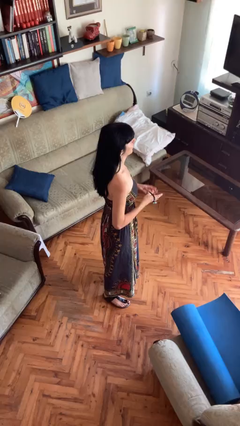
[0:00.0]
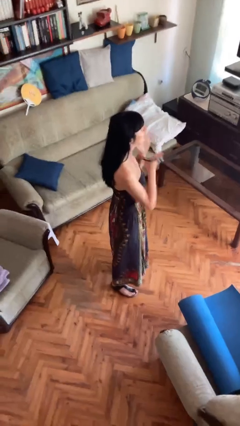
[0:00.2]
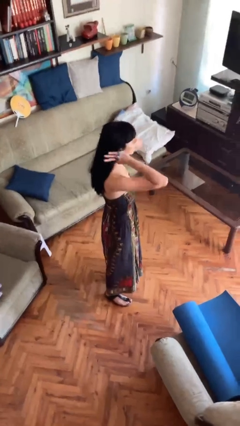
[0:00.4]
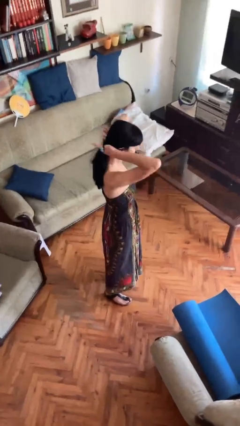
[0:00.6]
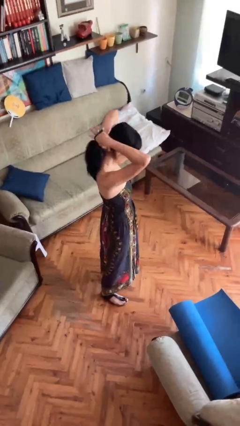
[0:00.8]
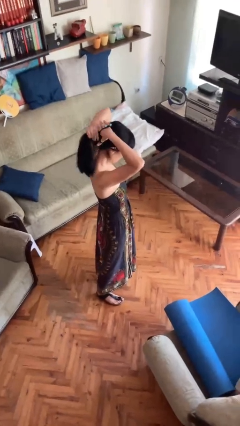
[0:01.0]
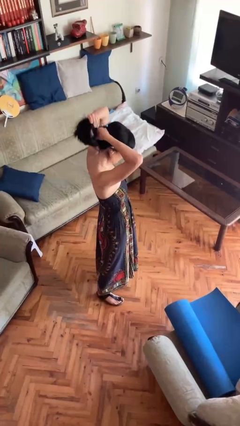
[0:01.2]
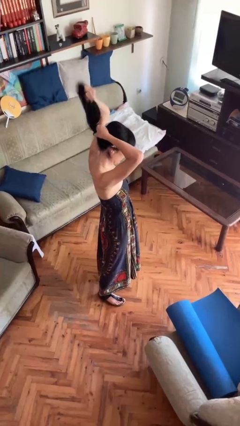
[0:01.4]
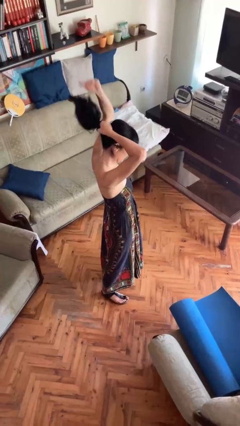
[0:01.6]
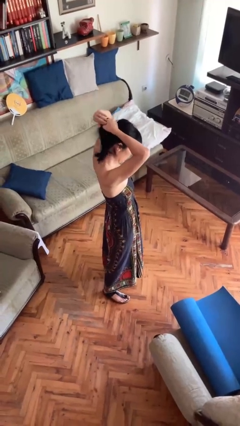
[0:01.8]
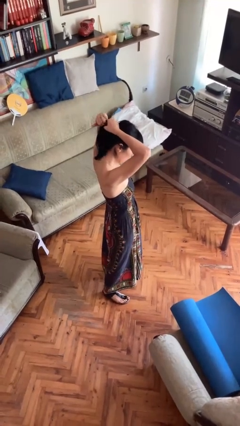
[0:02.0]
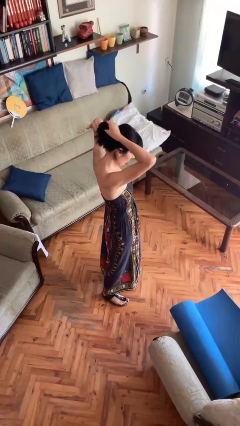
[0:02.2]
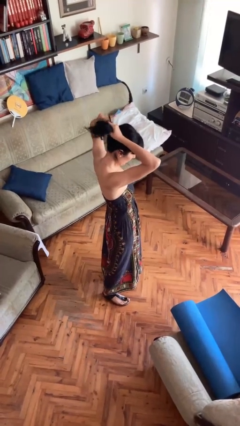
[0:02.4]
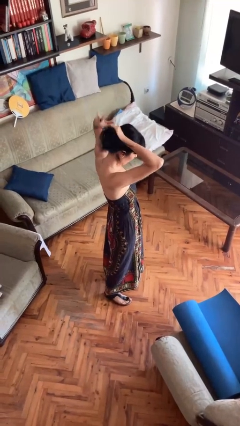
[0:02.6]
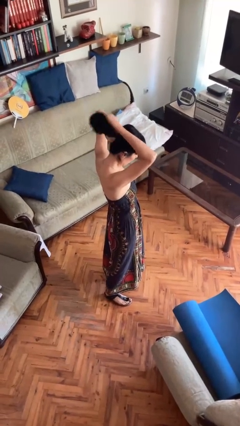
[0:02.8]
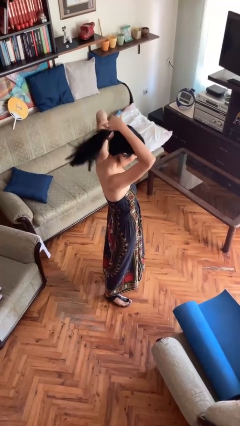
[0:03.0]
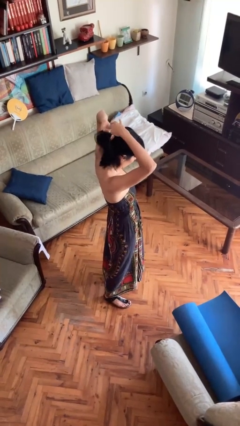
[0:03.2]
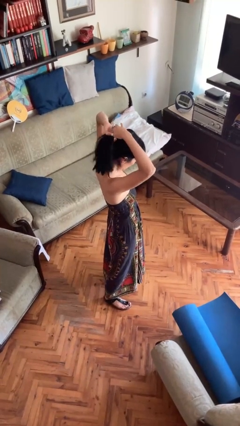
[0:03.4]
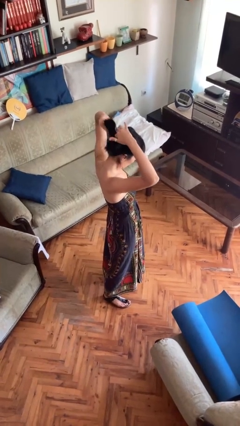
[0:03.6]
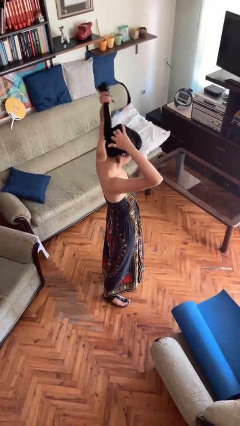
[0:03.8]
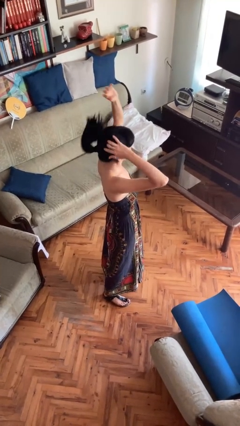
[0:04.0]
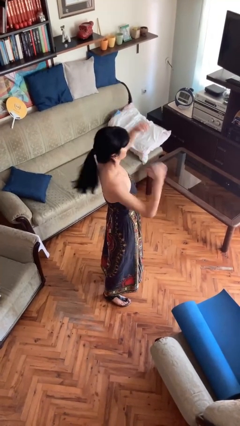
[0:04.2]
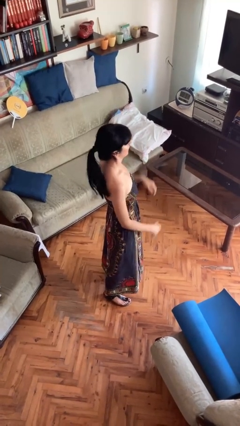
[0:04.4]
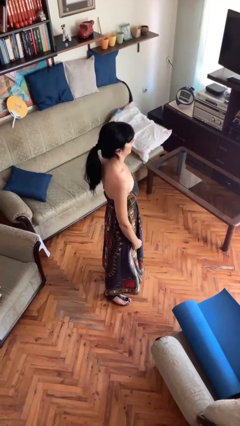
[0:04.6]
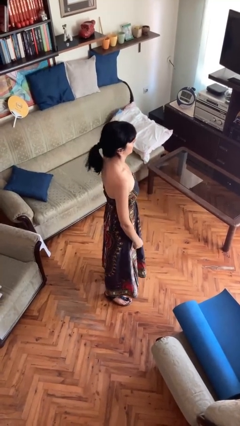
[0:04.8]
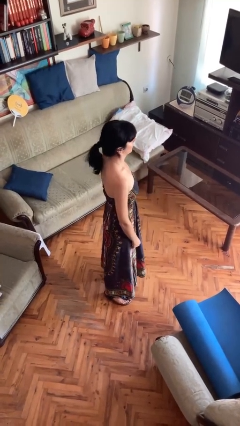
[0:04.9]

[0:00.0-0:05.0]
person puts hair in ponytail

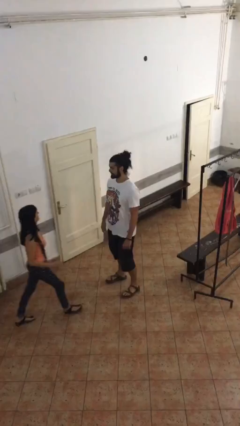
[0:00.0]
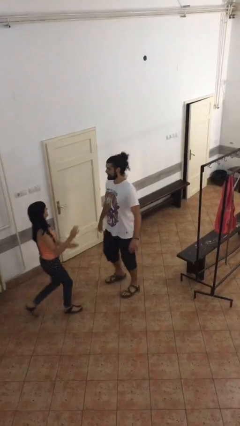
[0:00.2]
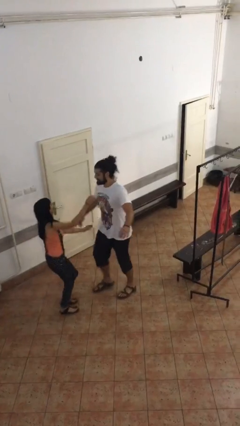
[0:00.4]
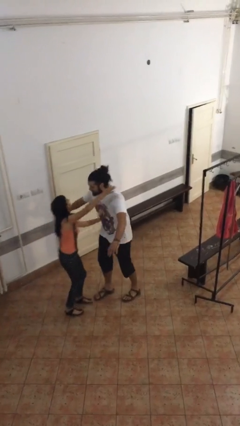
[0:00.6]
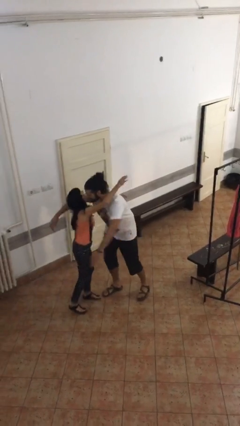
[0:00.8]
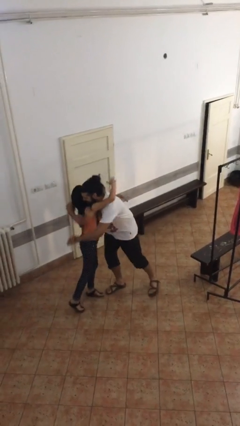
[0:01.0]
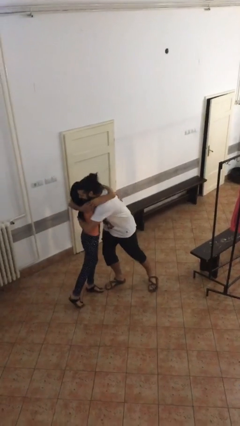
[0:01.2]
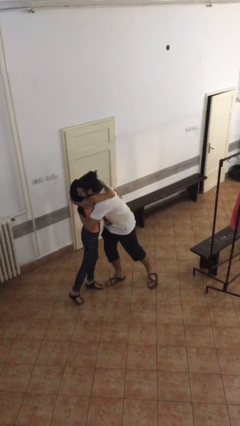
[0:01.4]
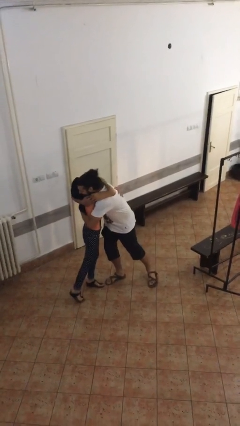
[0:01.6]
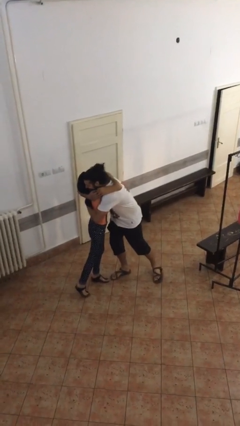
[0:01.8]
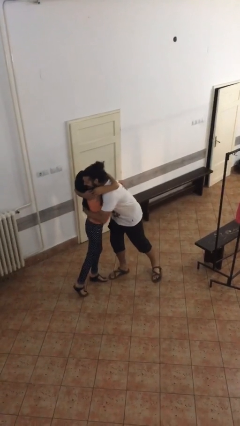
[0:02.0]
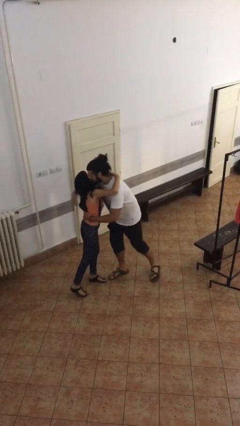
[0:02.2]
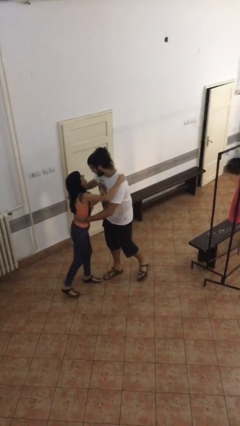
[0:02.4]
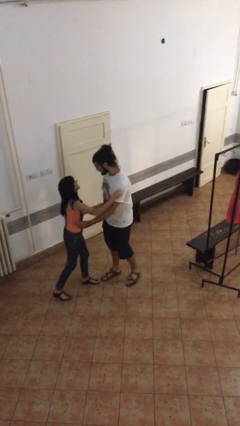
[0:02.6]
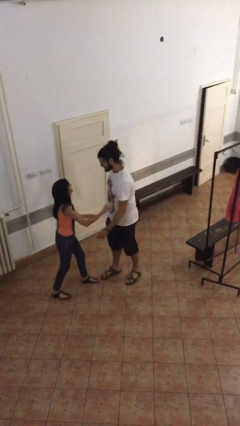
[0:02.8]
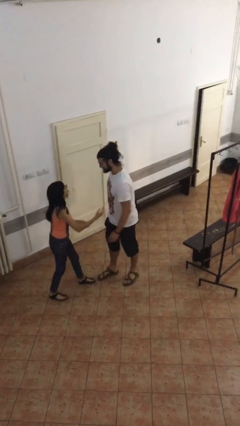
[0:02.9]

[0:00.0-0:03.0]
person embraces person

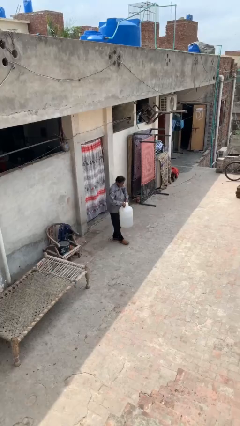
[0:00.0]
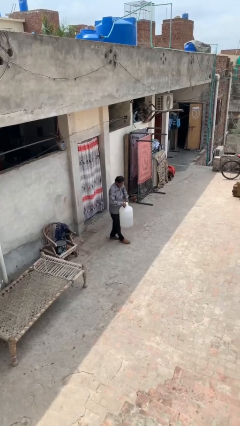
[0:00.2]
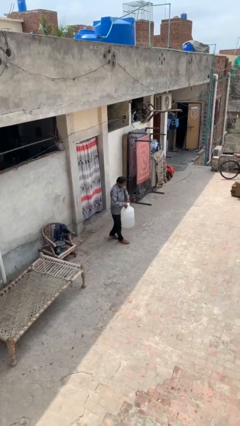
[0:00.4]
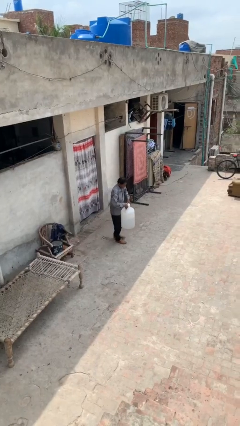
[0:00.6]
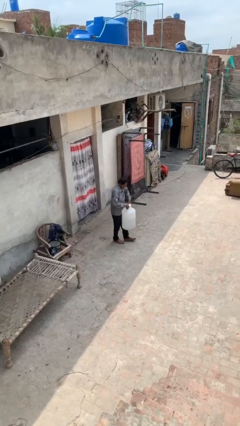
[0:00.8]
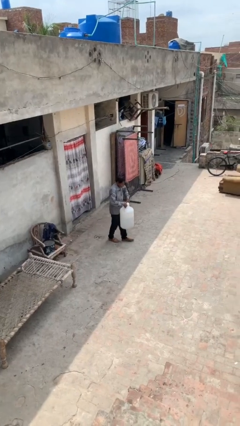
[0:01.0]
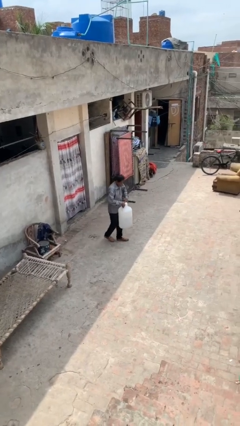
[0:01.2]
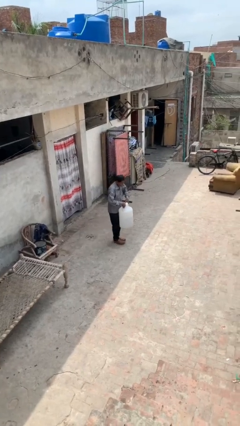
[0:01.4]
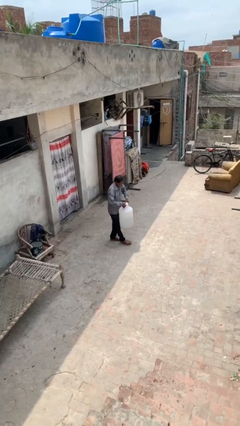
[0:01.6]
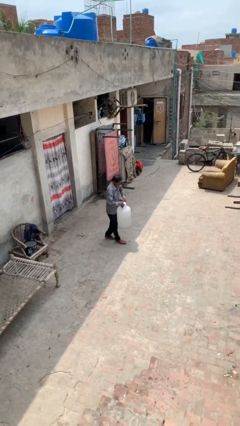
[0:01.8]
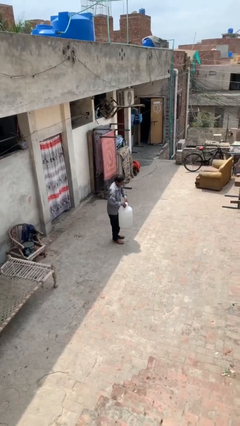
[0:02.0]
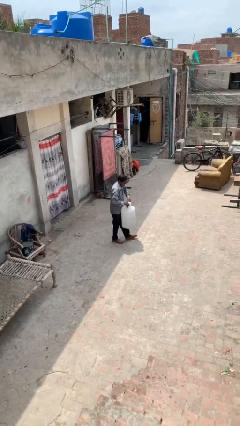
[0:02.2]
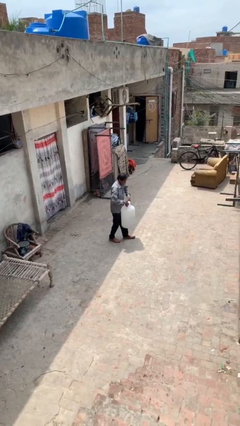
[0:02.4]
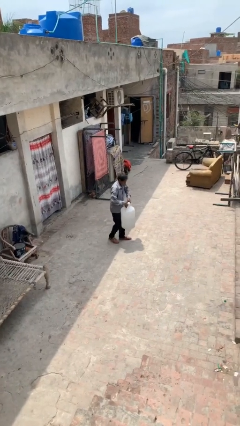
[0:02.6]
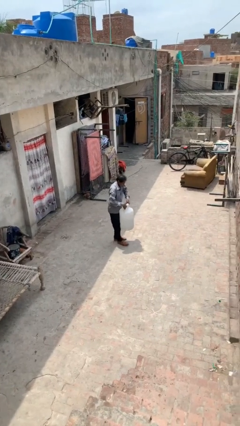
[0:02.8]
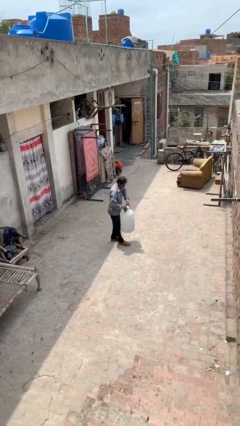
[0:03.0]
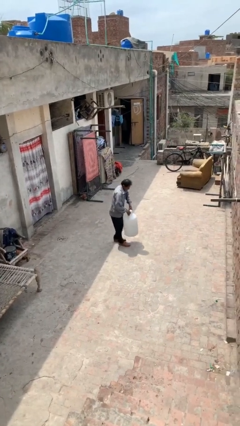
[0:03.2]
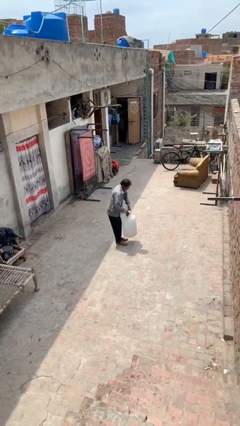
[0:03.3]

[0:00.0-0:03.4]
person carries heavy object

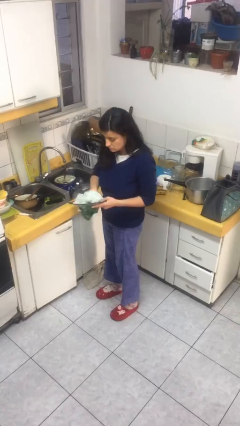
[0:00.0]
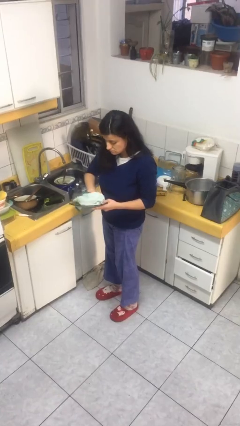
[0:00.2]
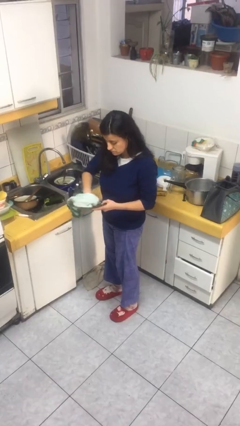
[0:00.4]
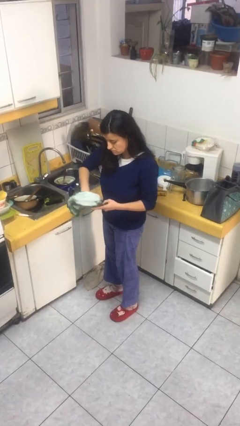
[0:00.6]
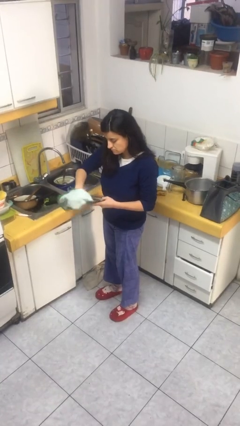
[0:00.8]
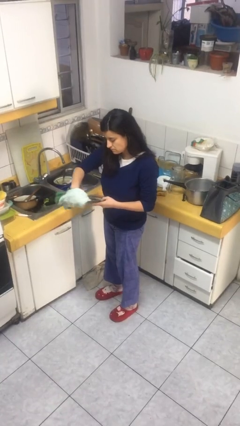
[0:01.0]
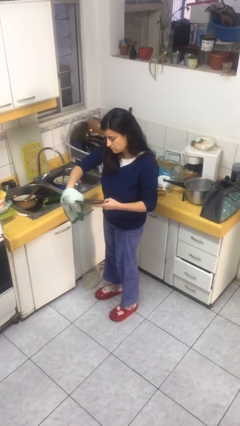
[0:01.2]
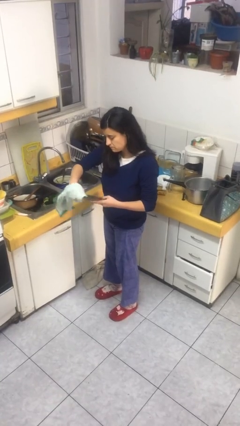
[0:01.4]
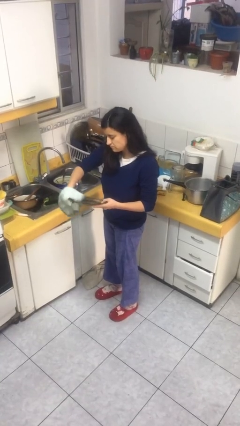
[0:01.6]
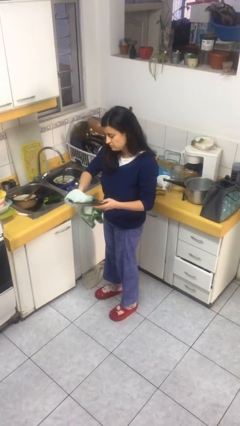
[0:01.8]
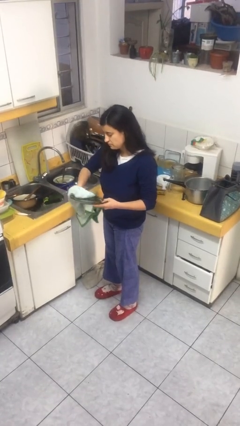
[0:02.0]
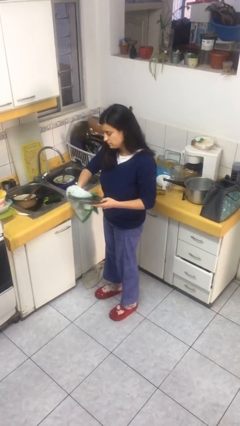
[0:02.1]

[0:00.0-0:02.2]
person dries dish

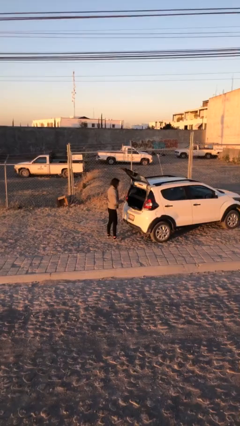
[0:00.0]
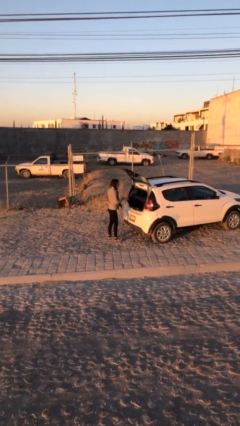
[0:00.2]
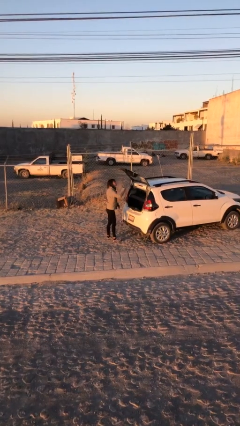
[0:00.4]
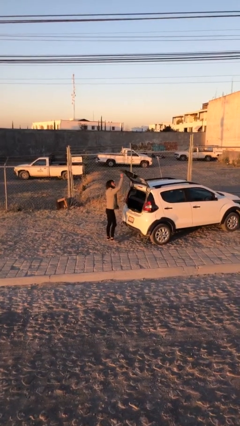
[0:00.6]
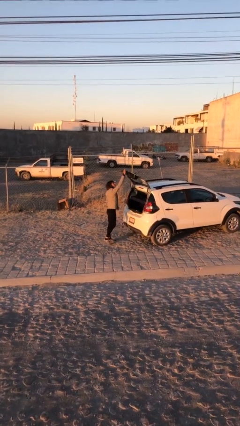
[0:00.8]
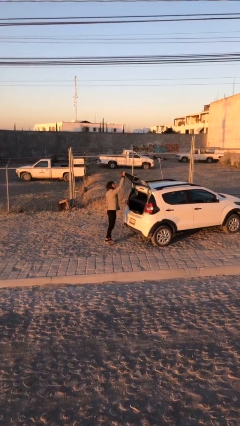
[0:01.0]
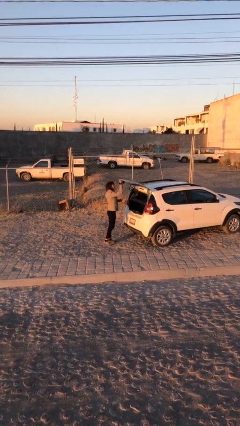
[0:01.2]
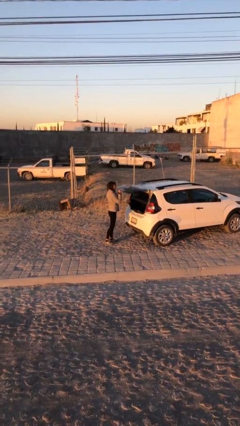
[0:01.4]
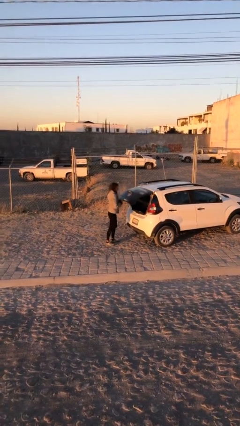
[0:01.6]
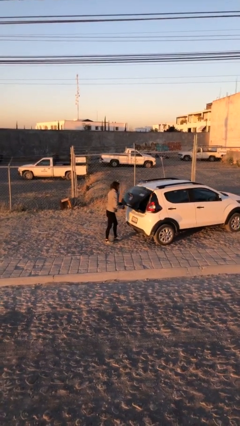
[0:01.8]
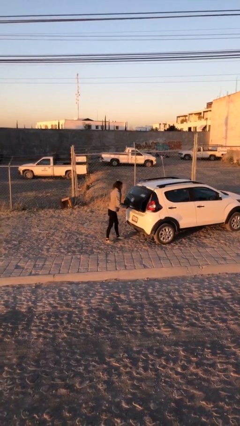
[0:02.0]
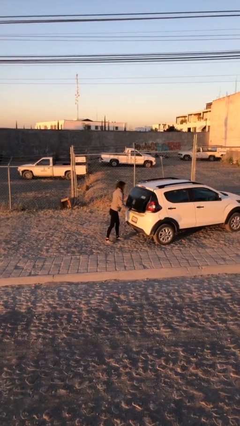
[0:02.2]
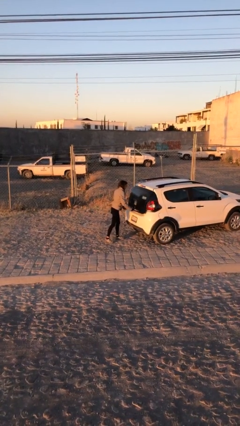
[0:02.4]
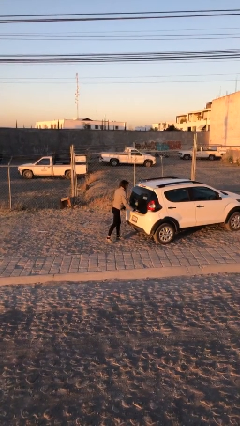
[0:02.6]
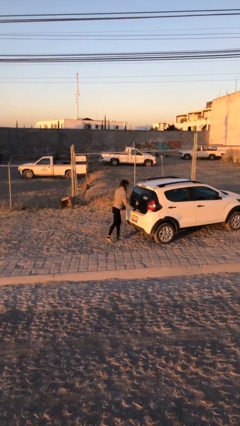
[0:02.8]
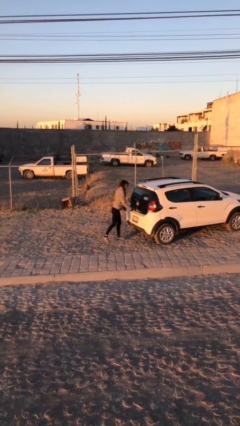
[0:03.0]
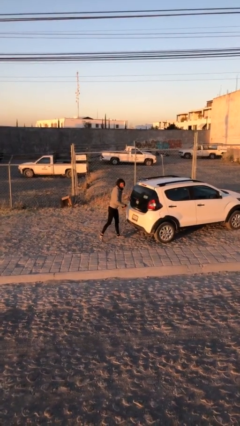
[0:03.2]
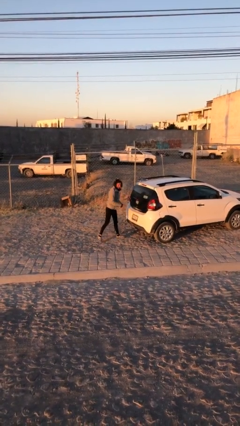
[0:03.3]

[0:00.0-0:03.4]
person closes car trunk

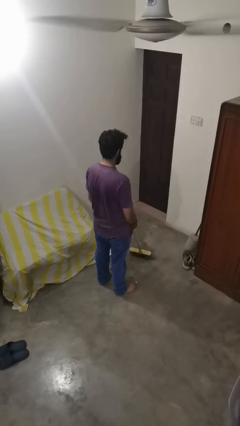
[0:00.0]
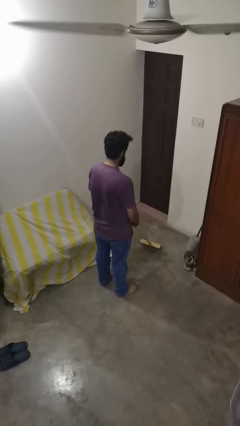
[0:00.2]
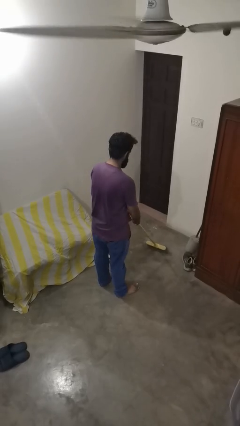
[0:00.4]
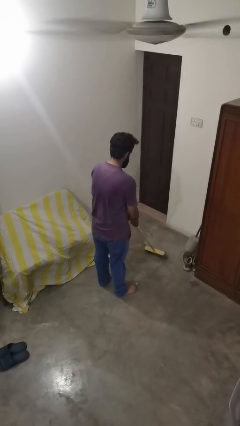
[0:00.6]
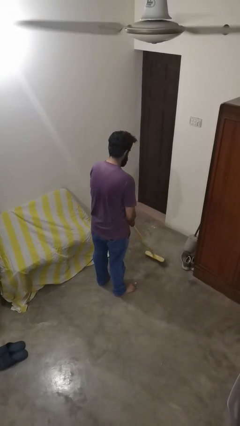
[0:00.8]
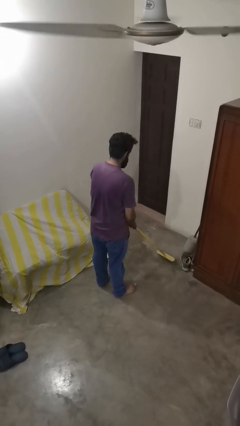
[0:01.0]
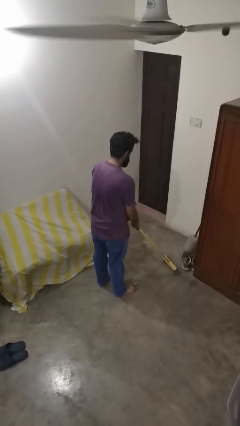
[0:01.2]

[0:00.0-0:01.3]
person sweeps floor
